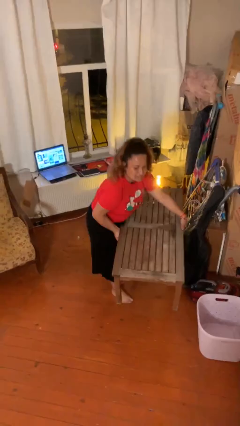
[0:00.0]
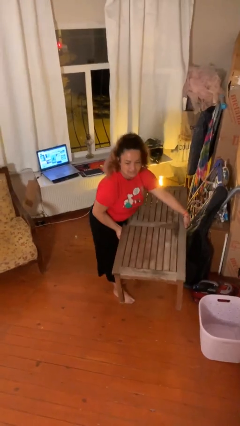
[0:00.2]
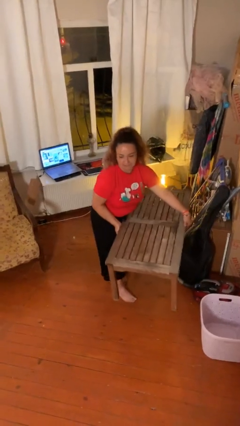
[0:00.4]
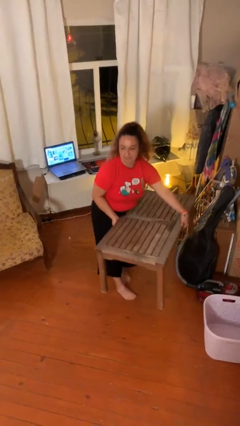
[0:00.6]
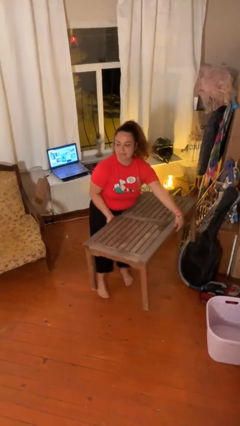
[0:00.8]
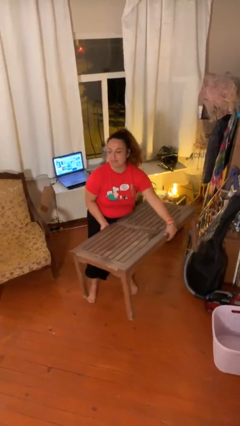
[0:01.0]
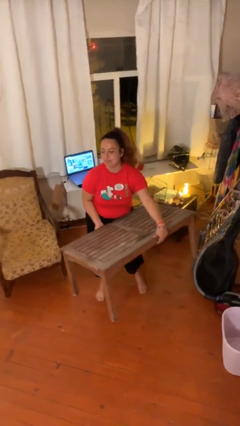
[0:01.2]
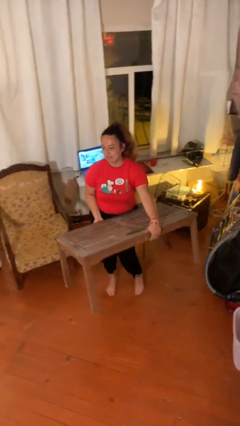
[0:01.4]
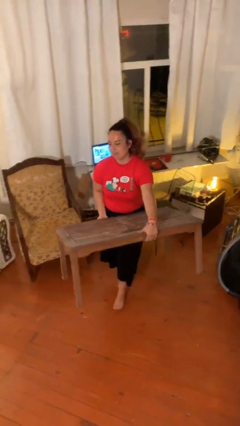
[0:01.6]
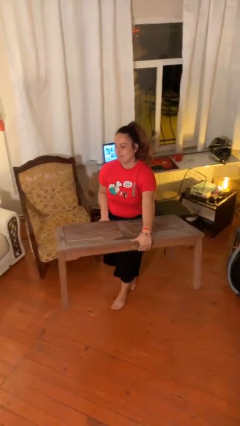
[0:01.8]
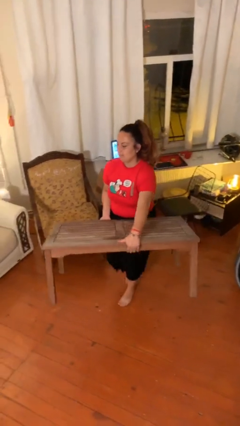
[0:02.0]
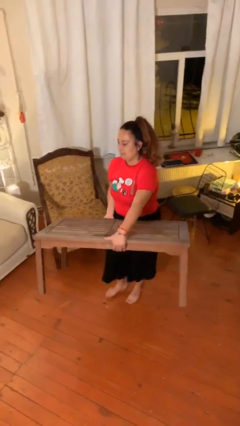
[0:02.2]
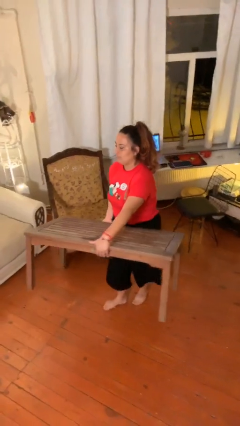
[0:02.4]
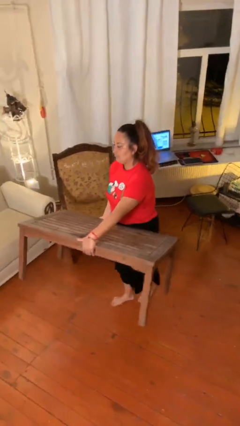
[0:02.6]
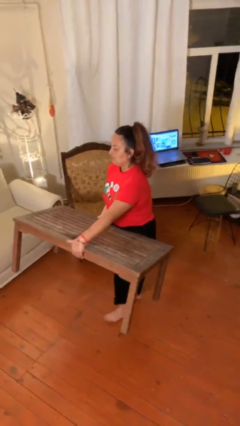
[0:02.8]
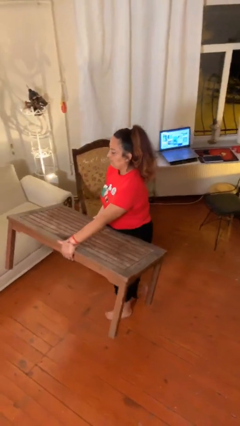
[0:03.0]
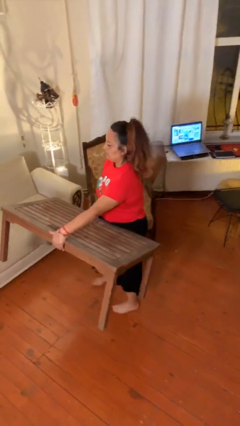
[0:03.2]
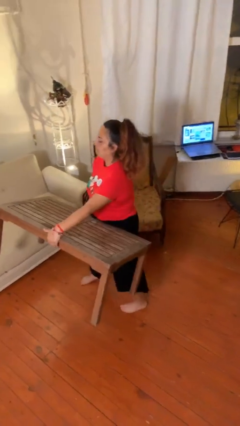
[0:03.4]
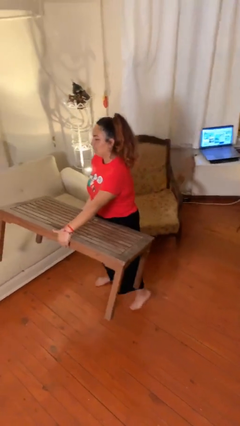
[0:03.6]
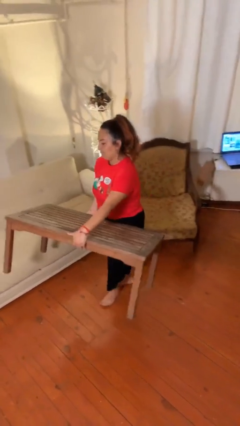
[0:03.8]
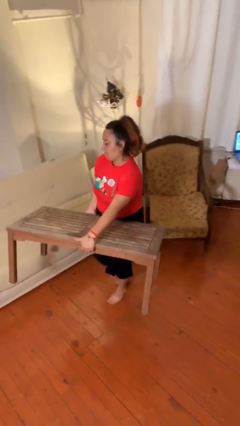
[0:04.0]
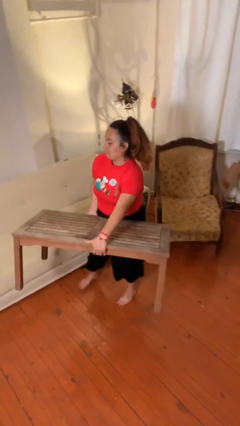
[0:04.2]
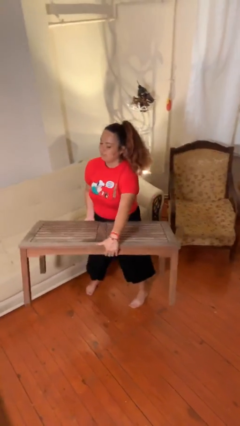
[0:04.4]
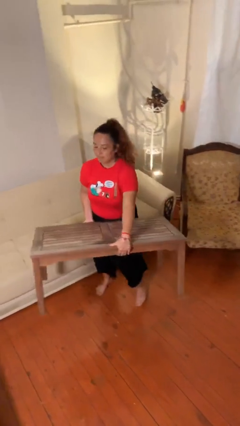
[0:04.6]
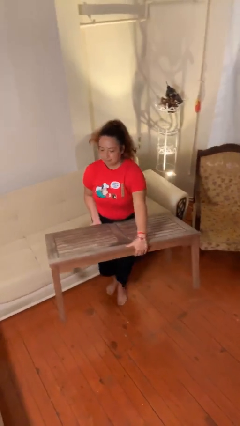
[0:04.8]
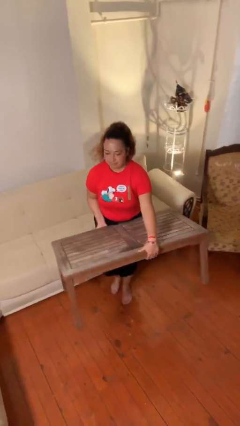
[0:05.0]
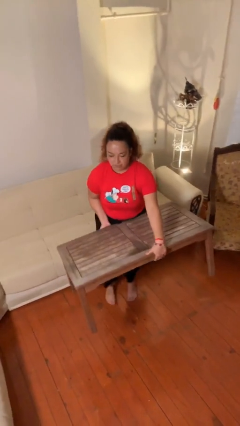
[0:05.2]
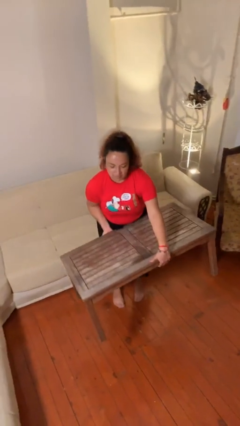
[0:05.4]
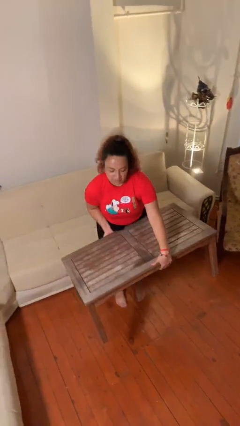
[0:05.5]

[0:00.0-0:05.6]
person carries heavy object

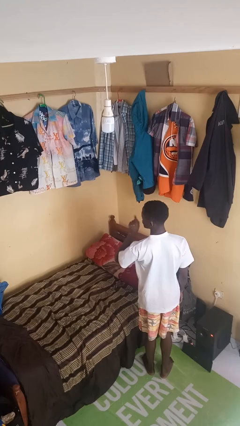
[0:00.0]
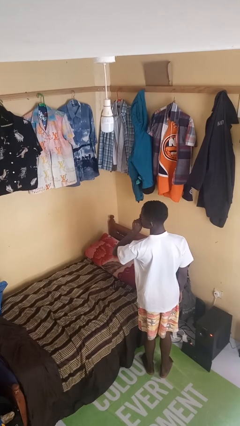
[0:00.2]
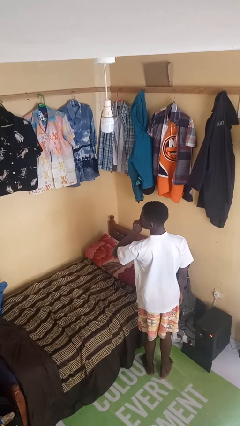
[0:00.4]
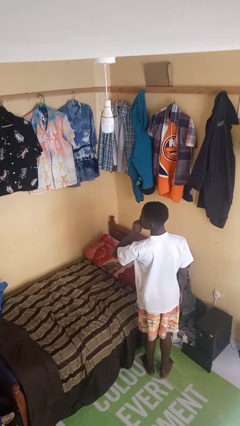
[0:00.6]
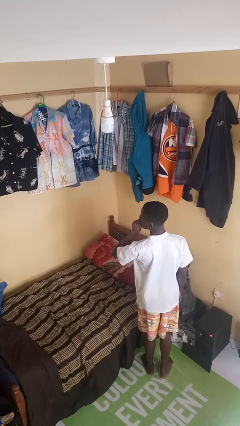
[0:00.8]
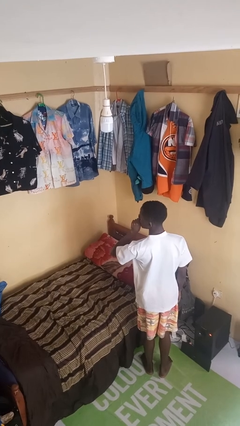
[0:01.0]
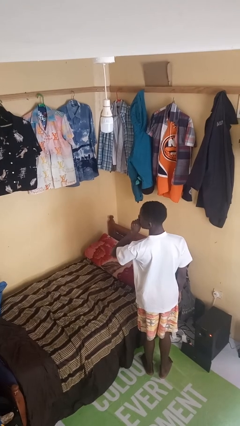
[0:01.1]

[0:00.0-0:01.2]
person gestures be quiet

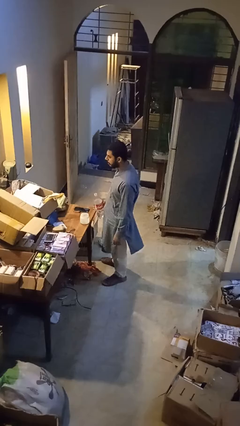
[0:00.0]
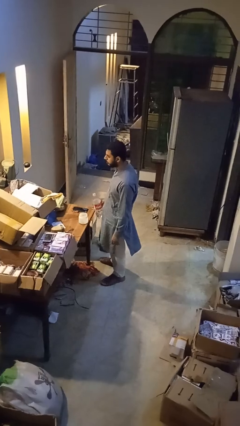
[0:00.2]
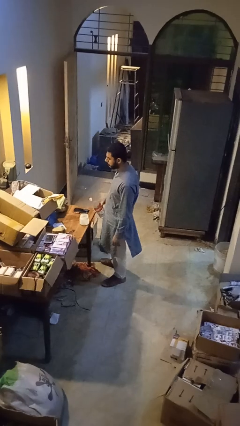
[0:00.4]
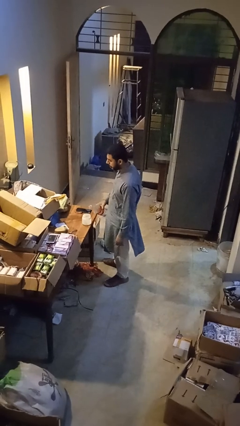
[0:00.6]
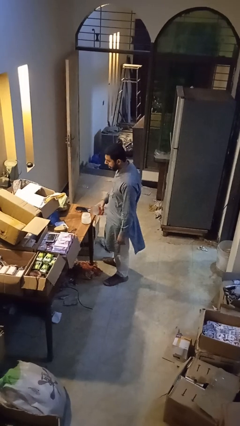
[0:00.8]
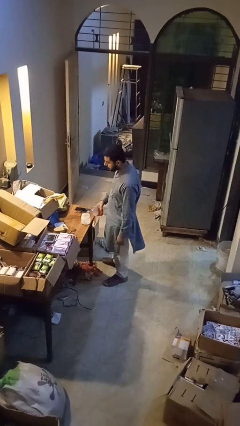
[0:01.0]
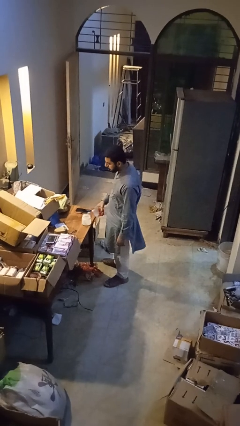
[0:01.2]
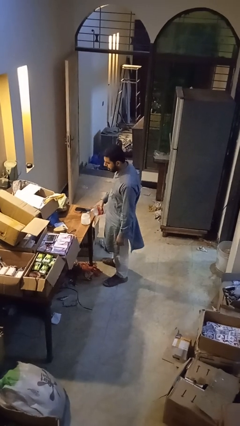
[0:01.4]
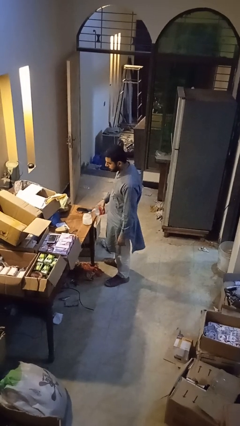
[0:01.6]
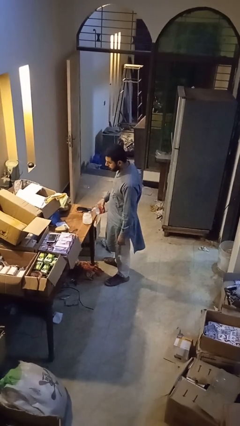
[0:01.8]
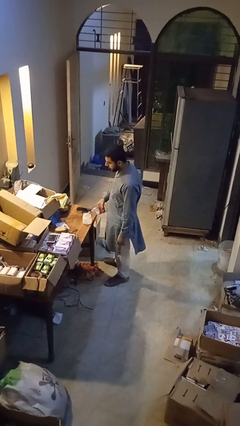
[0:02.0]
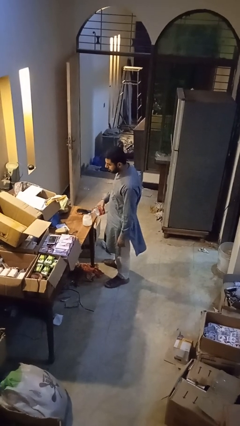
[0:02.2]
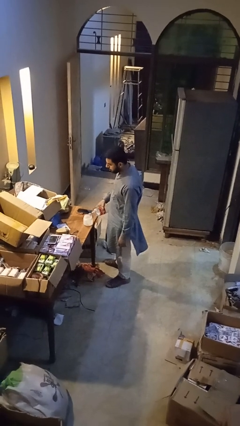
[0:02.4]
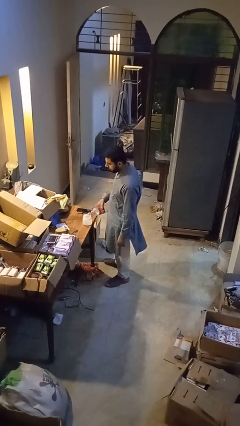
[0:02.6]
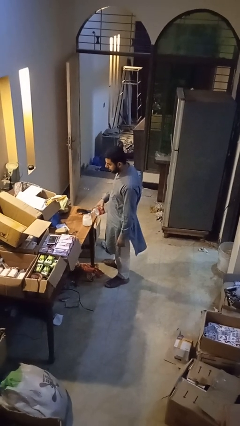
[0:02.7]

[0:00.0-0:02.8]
person pours liquid into cup

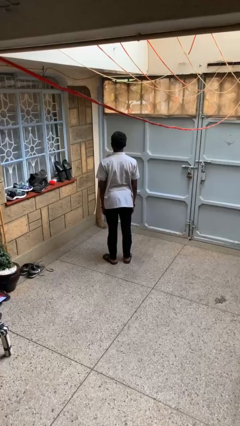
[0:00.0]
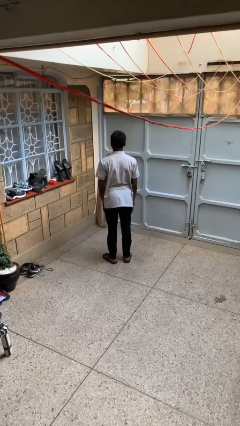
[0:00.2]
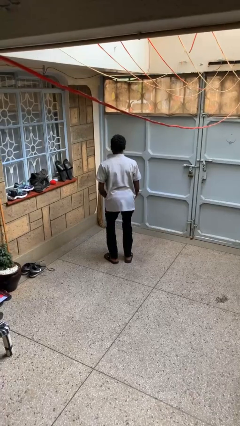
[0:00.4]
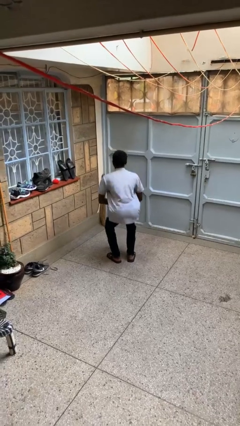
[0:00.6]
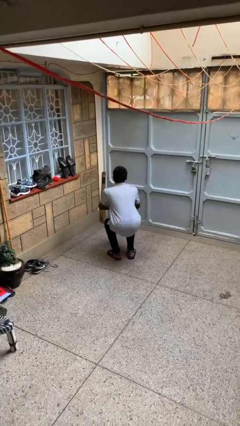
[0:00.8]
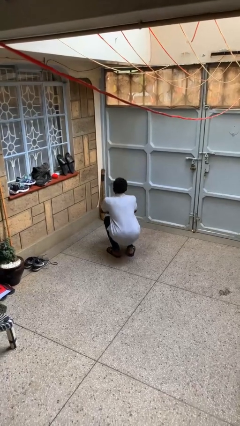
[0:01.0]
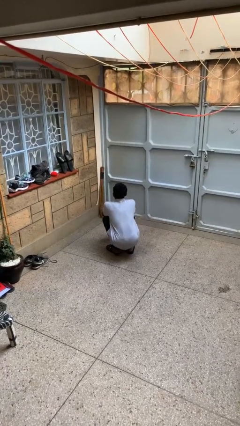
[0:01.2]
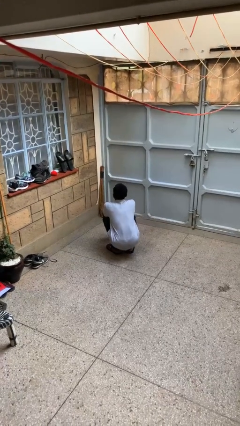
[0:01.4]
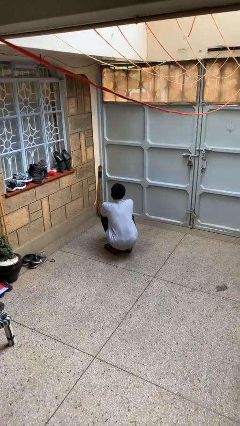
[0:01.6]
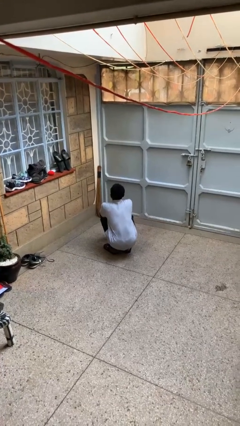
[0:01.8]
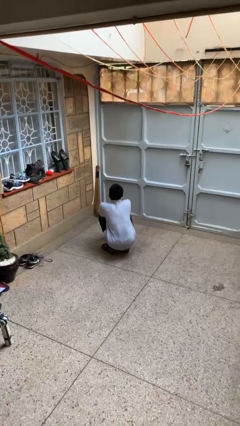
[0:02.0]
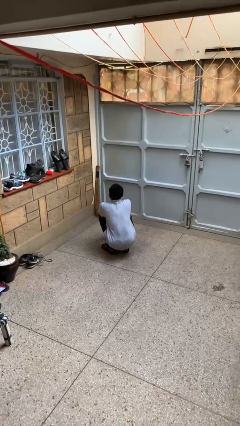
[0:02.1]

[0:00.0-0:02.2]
person squats

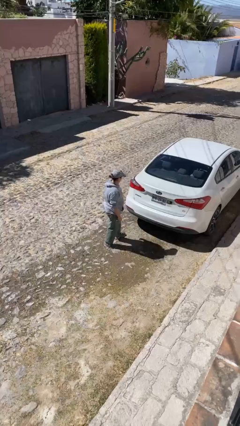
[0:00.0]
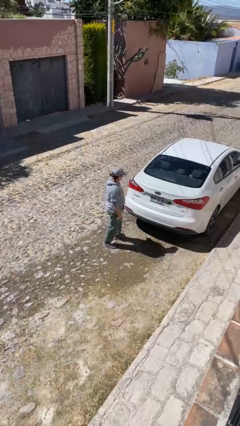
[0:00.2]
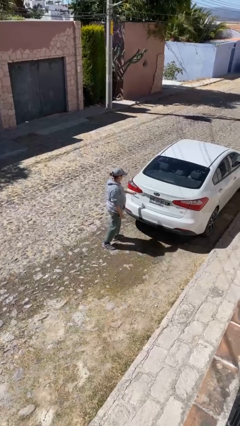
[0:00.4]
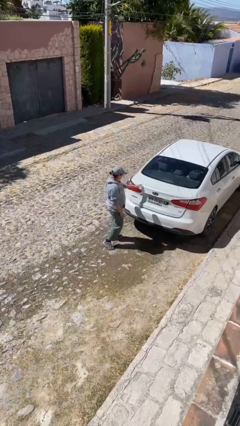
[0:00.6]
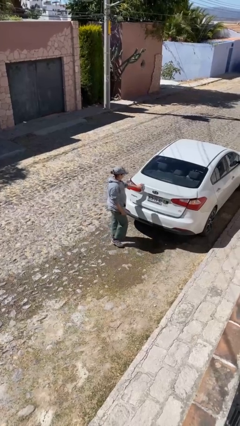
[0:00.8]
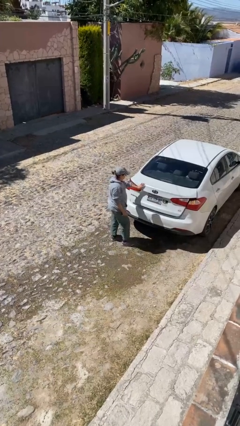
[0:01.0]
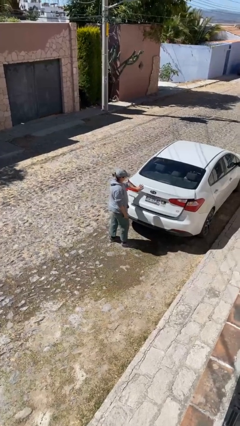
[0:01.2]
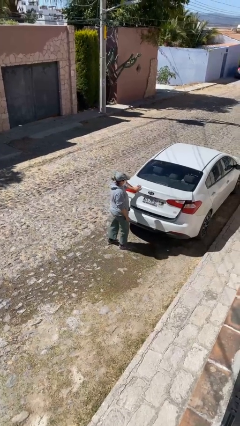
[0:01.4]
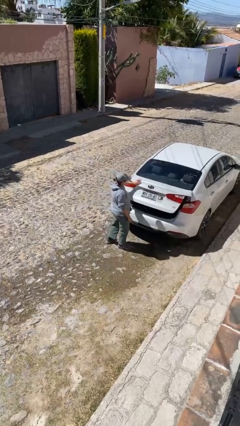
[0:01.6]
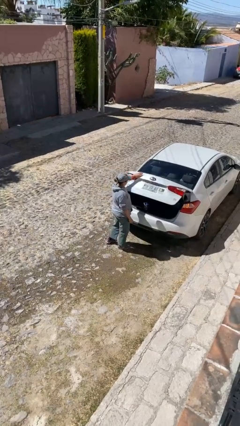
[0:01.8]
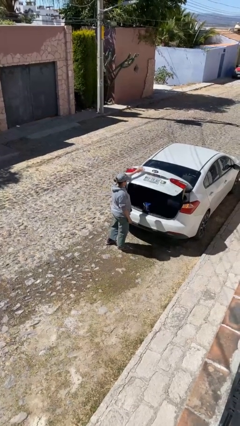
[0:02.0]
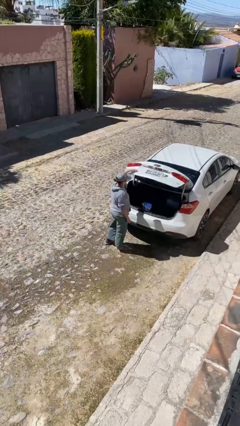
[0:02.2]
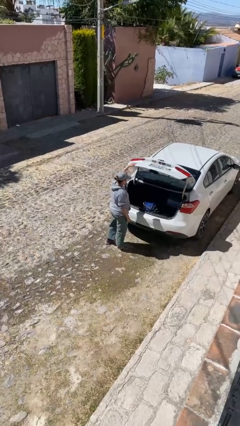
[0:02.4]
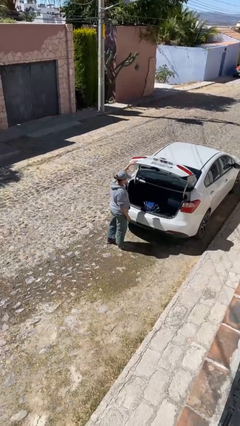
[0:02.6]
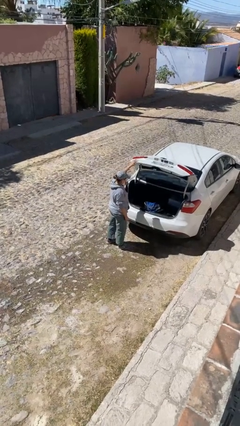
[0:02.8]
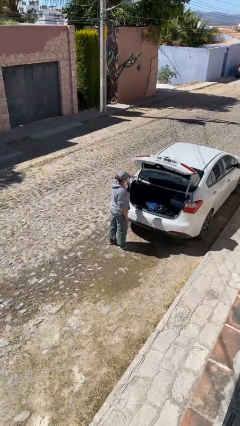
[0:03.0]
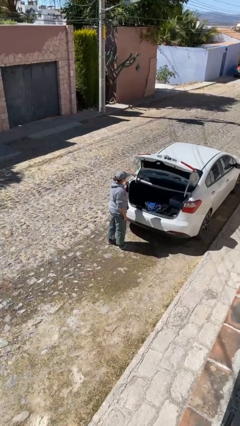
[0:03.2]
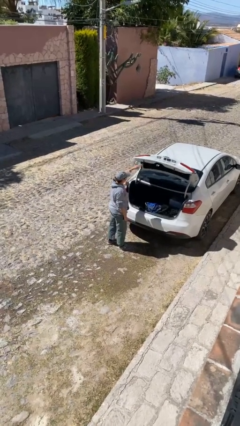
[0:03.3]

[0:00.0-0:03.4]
person opens car trunk

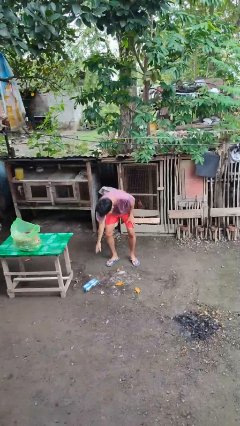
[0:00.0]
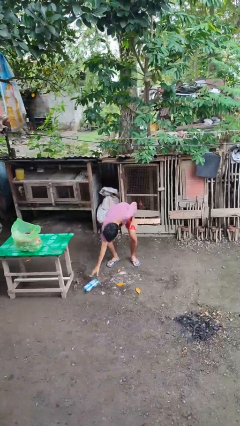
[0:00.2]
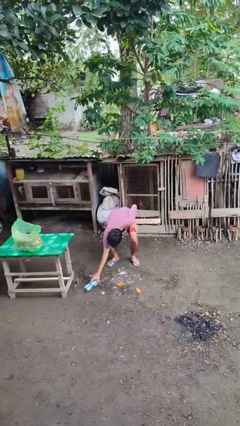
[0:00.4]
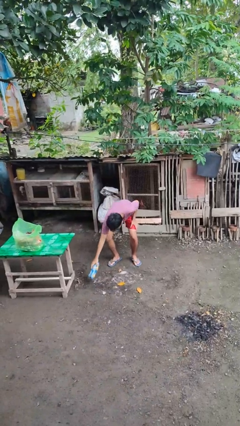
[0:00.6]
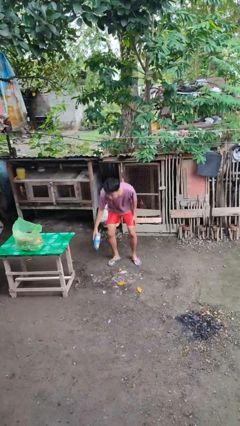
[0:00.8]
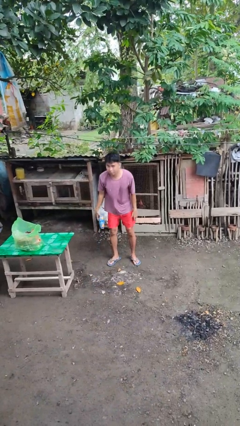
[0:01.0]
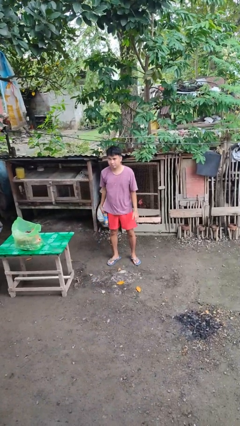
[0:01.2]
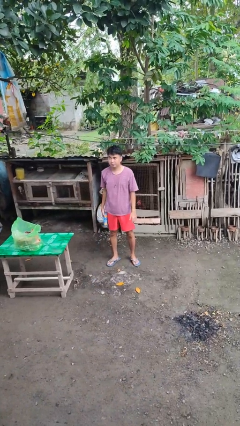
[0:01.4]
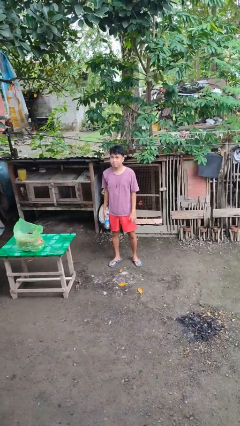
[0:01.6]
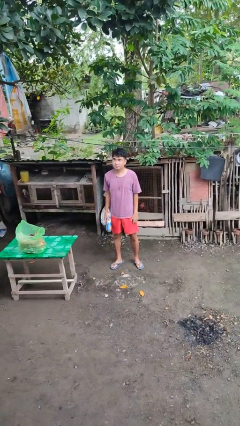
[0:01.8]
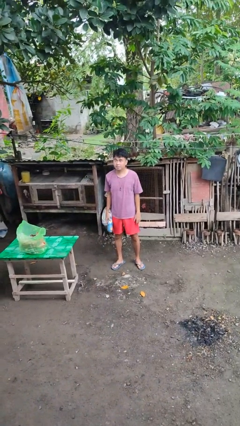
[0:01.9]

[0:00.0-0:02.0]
person picks up object from floor

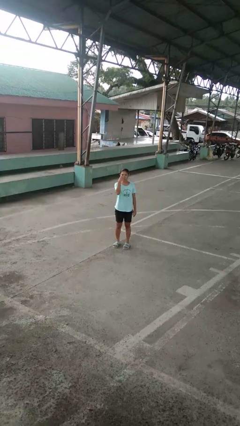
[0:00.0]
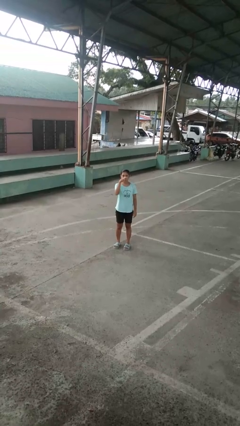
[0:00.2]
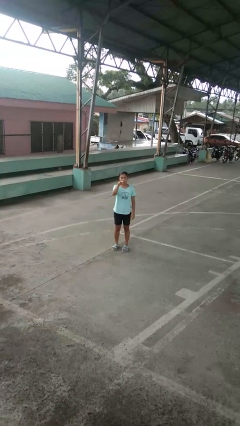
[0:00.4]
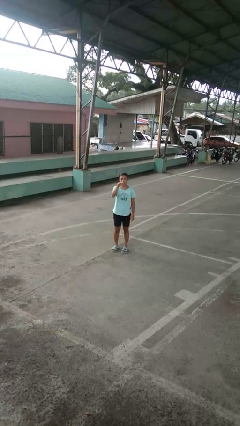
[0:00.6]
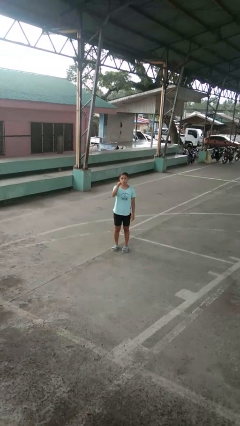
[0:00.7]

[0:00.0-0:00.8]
person gestures watch closely
